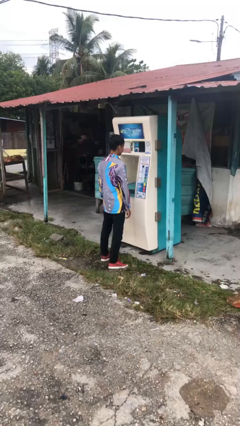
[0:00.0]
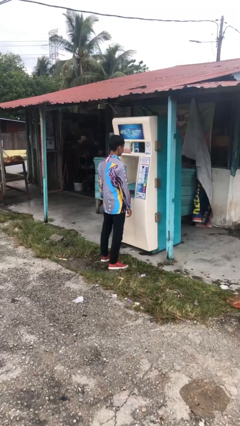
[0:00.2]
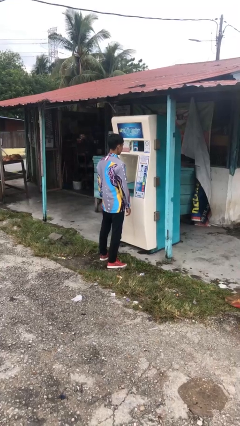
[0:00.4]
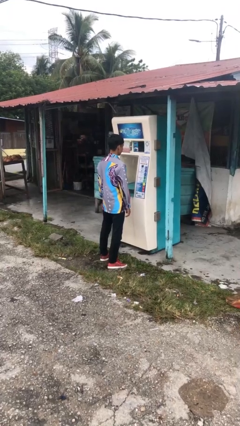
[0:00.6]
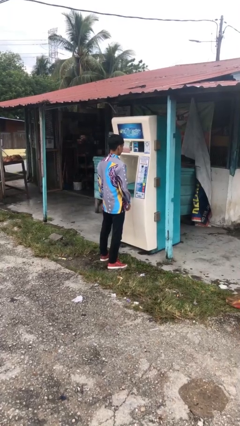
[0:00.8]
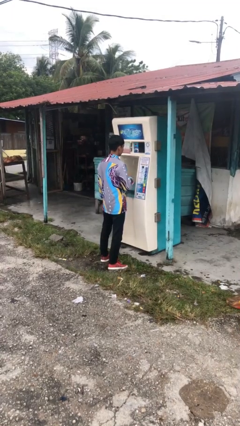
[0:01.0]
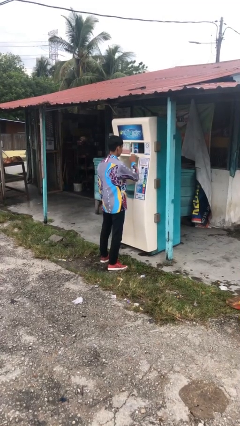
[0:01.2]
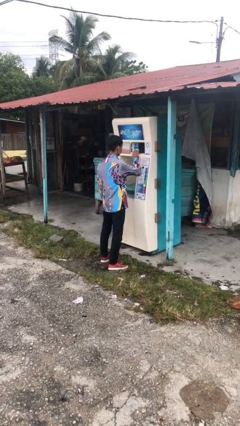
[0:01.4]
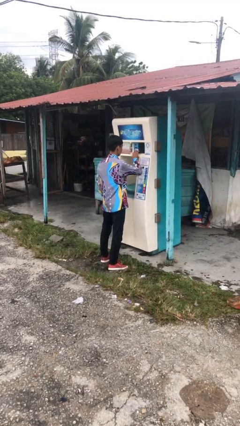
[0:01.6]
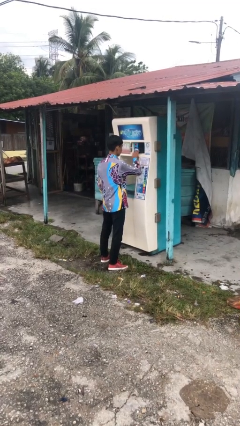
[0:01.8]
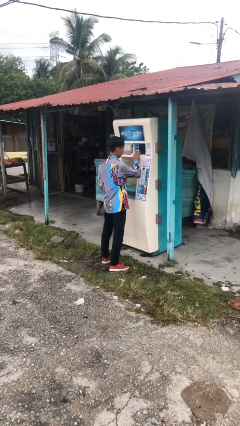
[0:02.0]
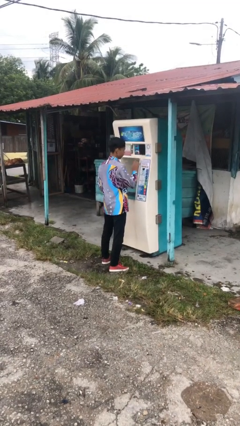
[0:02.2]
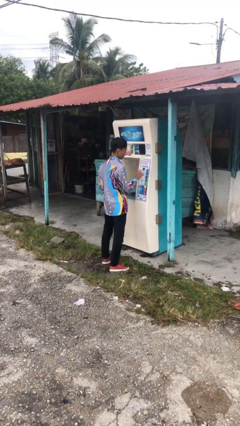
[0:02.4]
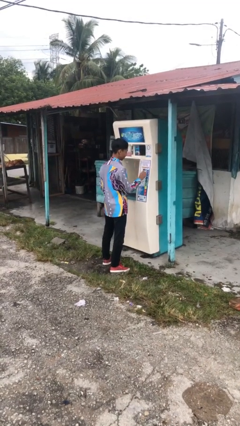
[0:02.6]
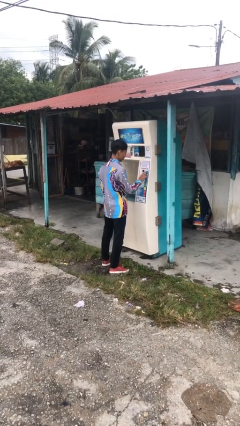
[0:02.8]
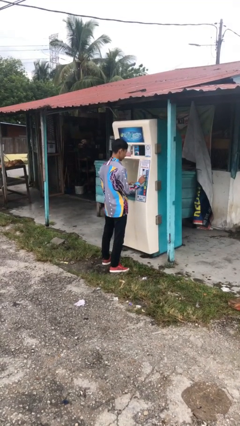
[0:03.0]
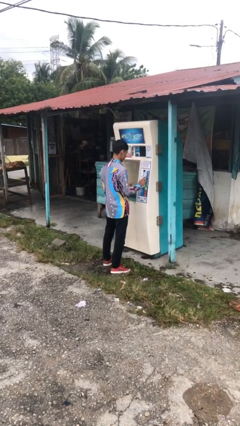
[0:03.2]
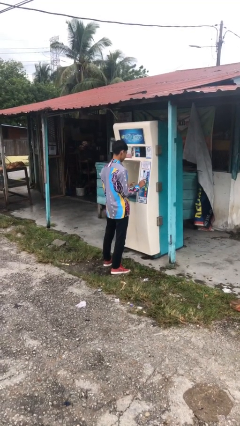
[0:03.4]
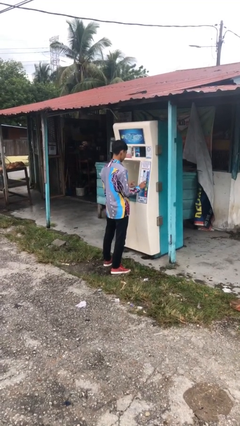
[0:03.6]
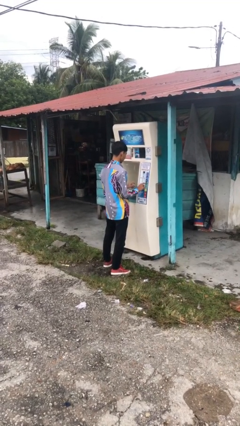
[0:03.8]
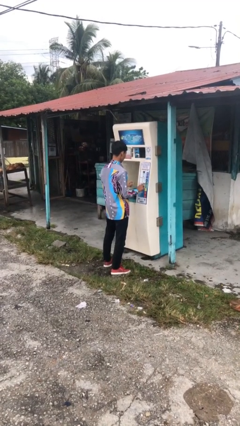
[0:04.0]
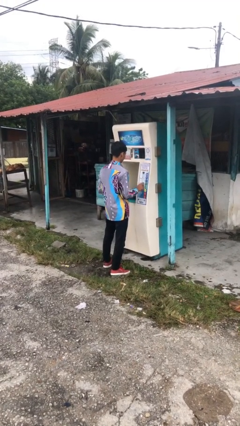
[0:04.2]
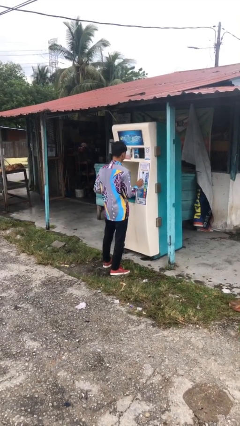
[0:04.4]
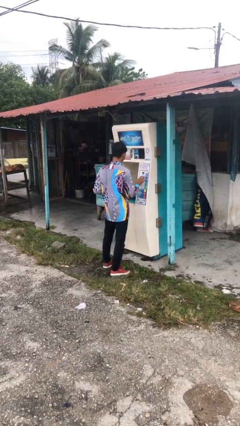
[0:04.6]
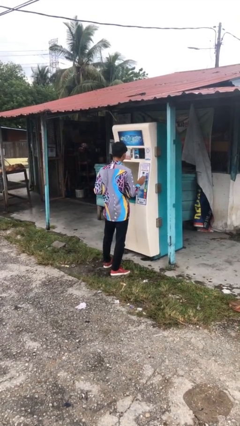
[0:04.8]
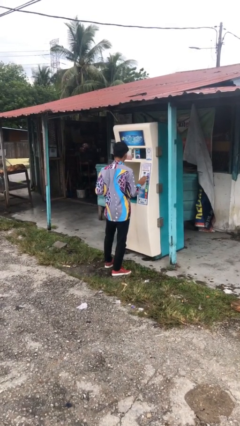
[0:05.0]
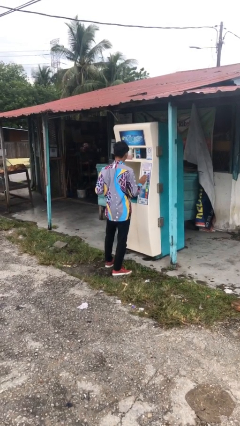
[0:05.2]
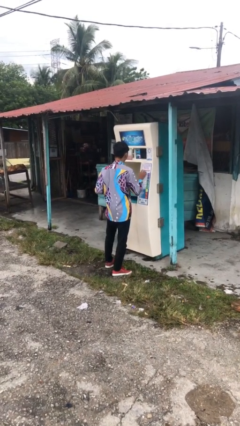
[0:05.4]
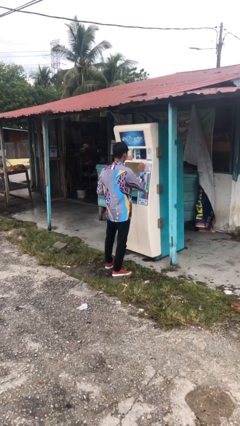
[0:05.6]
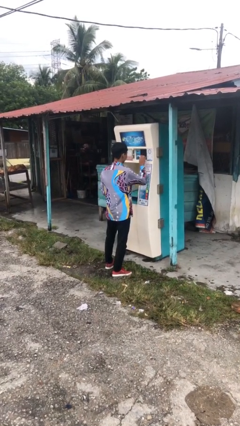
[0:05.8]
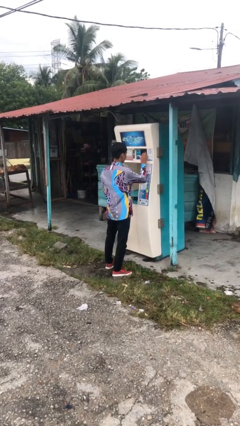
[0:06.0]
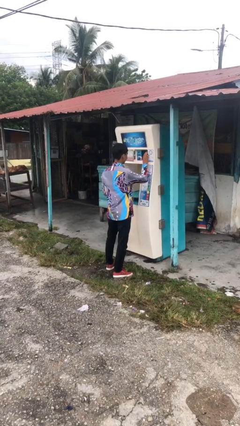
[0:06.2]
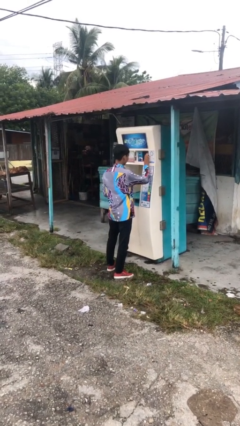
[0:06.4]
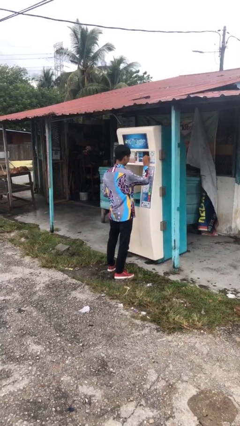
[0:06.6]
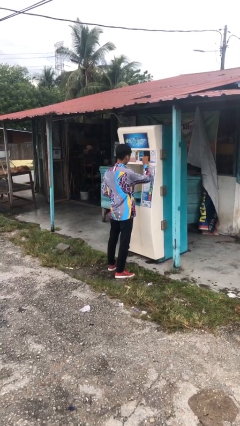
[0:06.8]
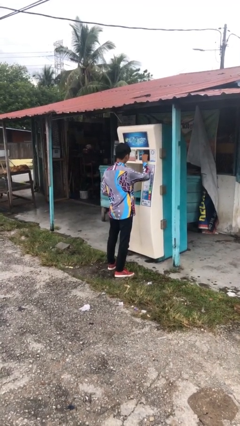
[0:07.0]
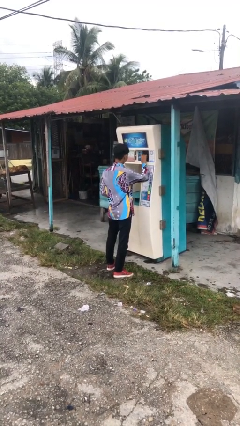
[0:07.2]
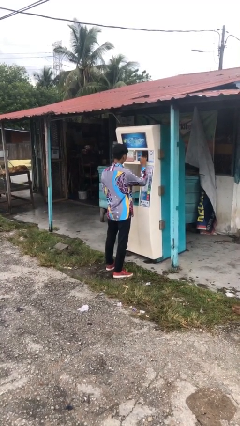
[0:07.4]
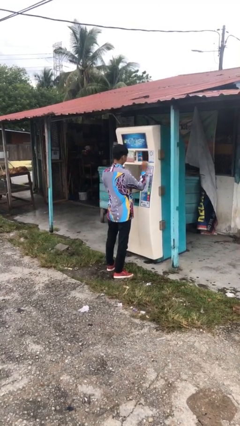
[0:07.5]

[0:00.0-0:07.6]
person purchases from machine

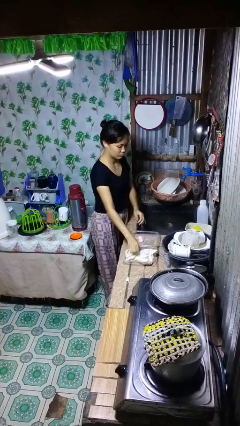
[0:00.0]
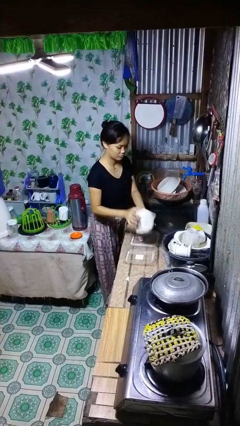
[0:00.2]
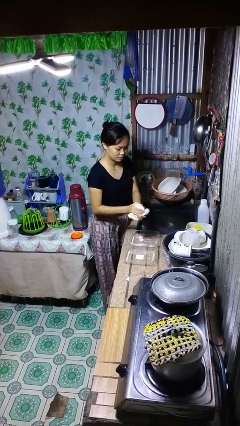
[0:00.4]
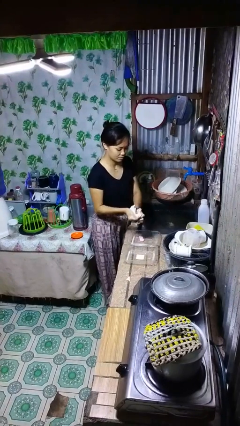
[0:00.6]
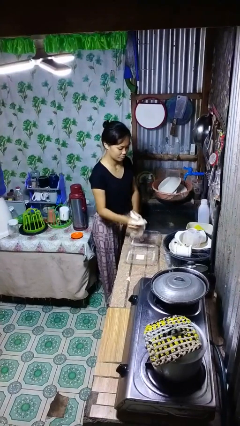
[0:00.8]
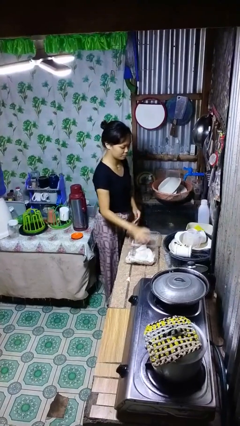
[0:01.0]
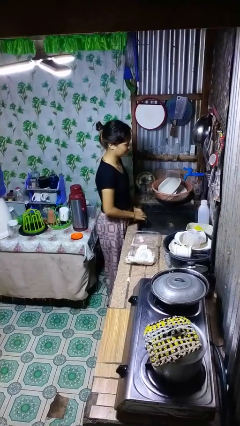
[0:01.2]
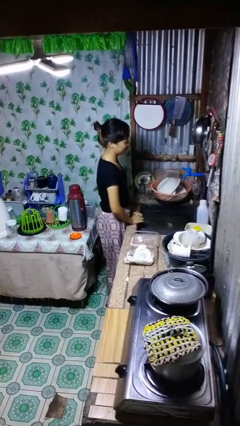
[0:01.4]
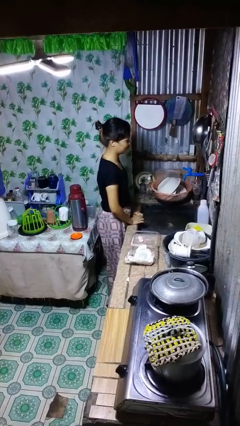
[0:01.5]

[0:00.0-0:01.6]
person dries hands with towel

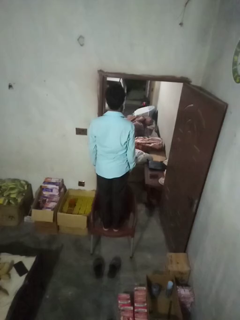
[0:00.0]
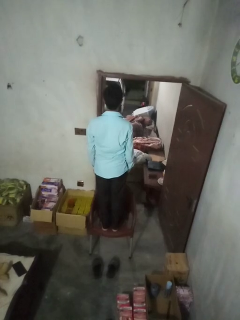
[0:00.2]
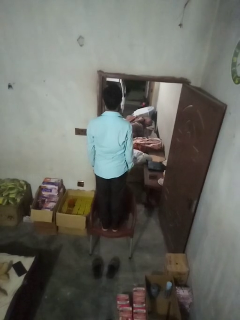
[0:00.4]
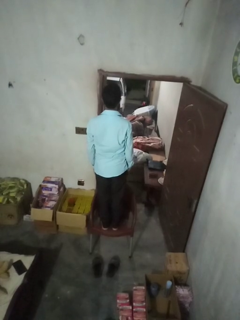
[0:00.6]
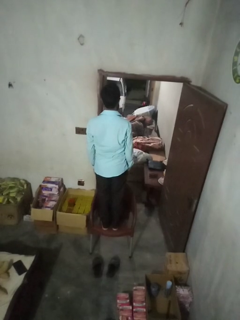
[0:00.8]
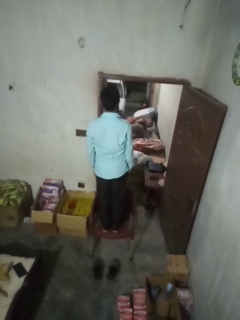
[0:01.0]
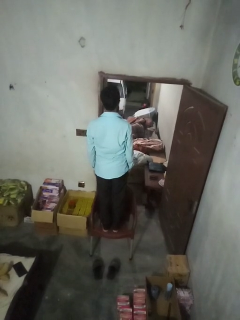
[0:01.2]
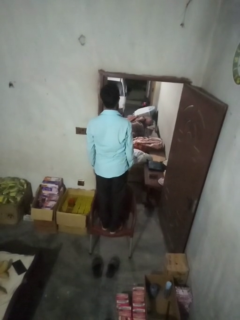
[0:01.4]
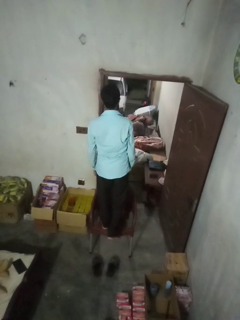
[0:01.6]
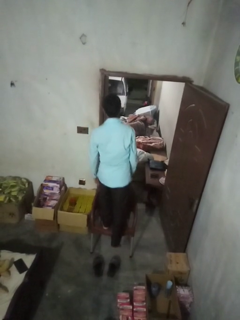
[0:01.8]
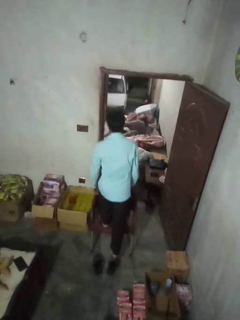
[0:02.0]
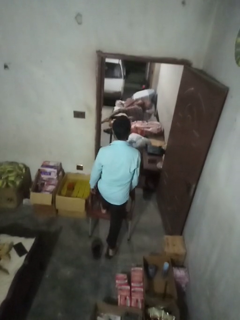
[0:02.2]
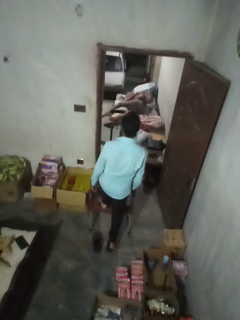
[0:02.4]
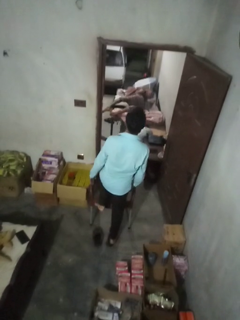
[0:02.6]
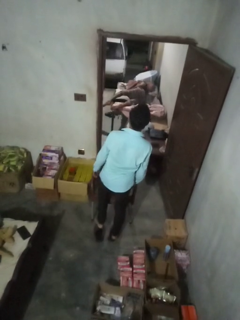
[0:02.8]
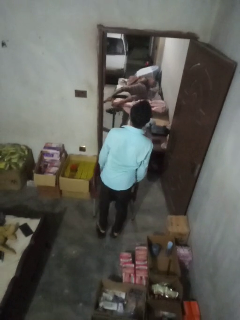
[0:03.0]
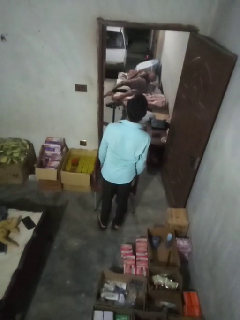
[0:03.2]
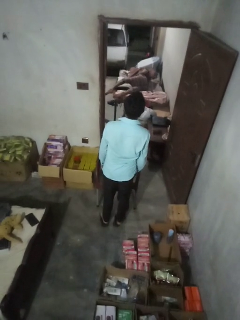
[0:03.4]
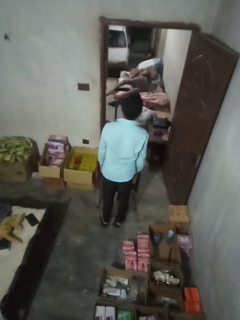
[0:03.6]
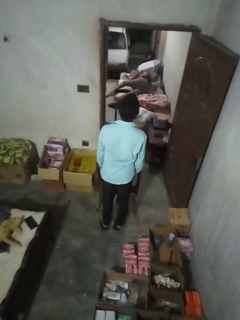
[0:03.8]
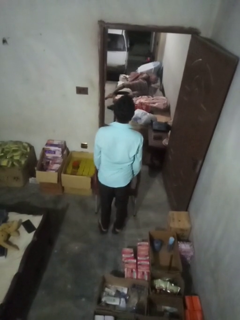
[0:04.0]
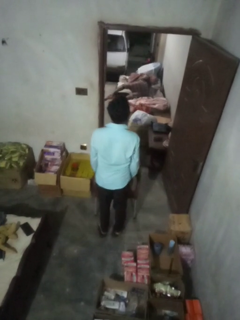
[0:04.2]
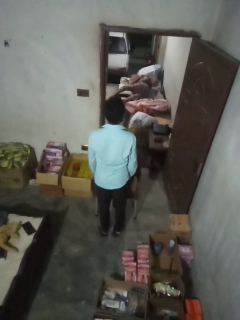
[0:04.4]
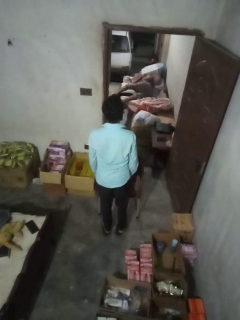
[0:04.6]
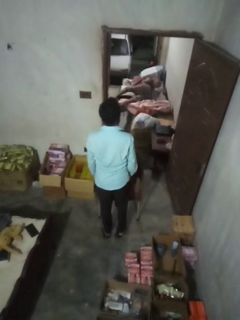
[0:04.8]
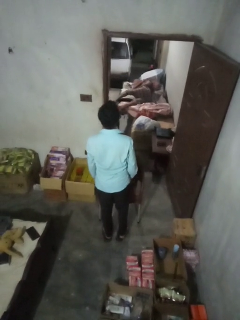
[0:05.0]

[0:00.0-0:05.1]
person climbs off chair

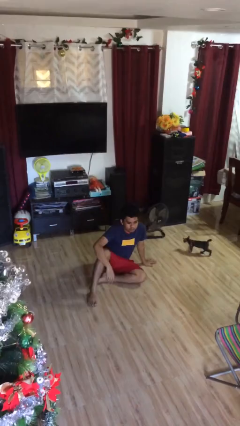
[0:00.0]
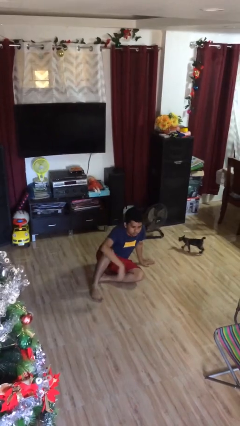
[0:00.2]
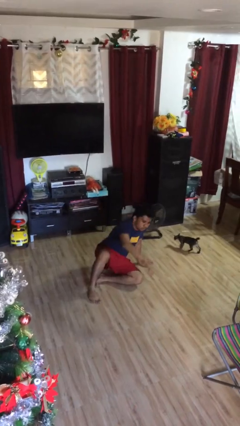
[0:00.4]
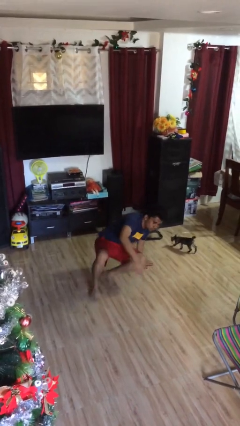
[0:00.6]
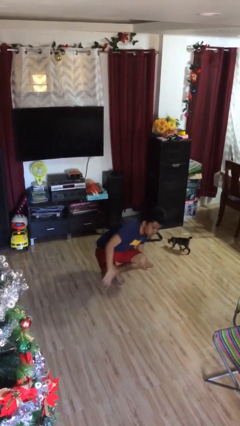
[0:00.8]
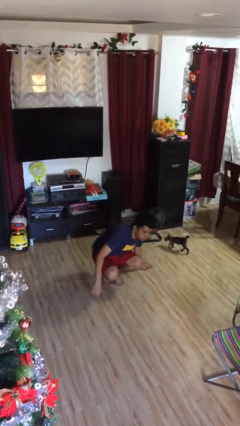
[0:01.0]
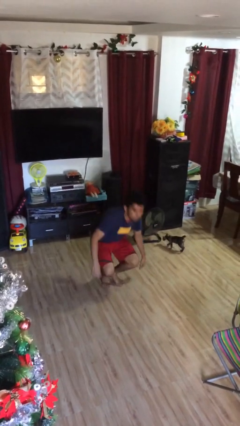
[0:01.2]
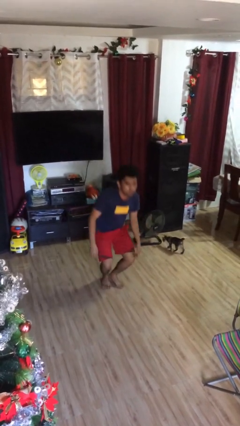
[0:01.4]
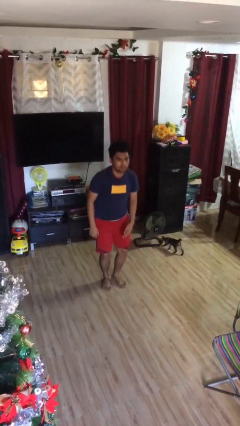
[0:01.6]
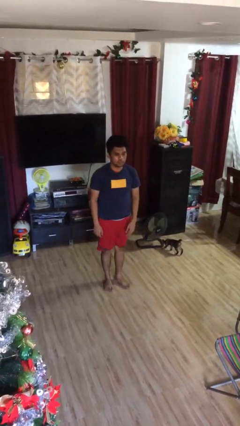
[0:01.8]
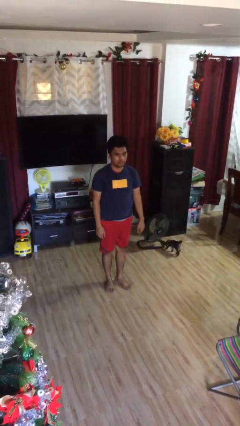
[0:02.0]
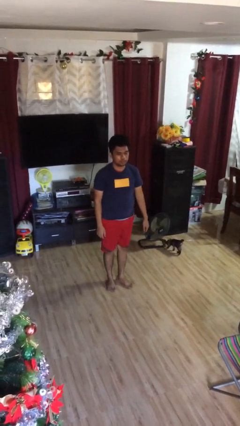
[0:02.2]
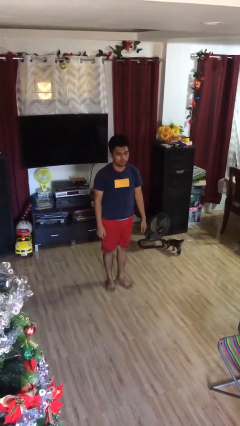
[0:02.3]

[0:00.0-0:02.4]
person stands up

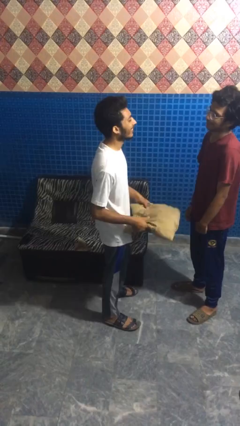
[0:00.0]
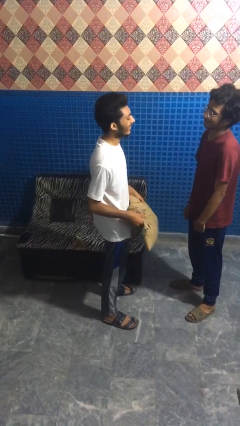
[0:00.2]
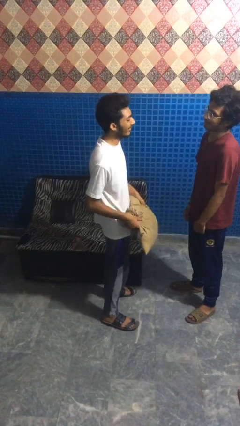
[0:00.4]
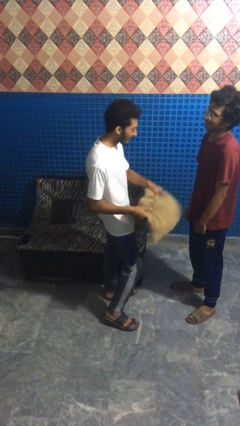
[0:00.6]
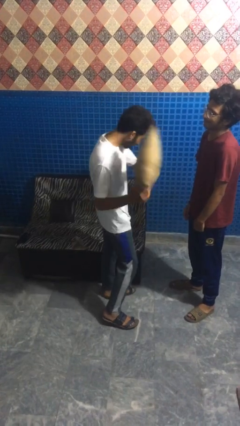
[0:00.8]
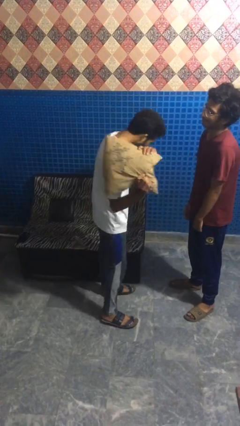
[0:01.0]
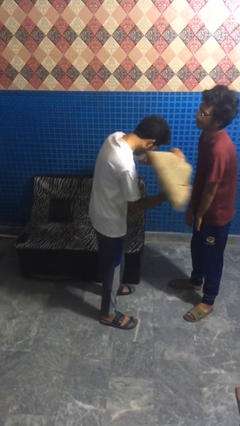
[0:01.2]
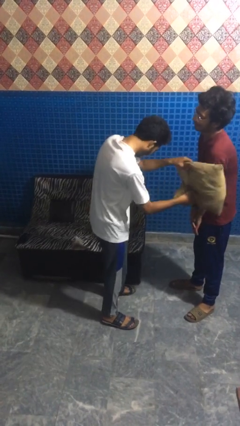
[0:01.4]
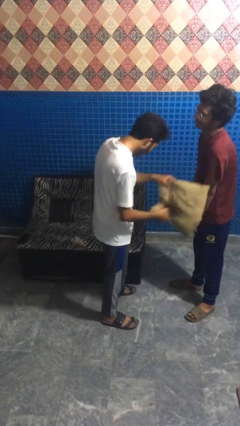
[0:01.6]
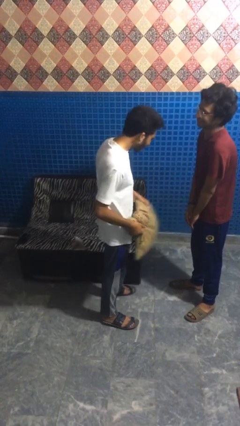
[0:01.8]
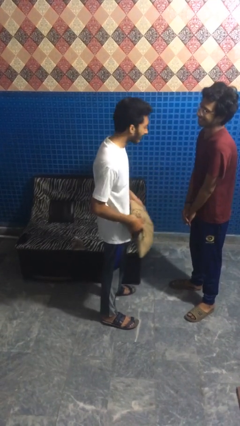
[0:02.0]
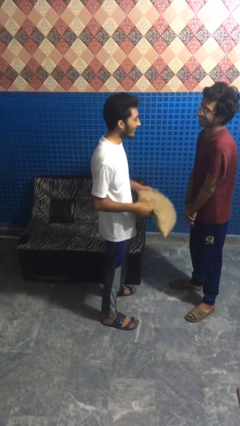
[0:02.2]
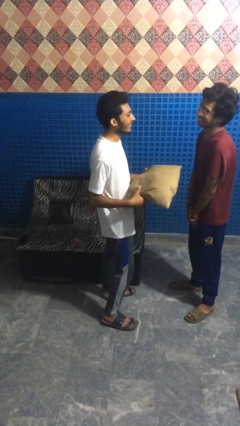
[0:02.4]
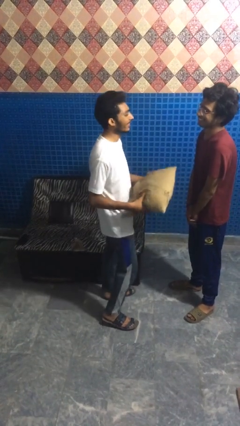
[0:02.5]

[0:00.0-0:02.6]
person hits person with pillow
